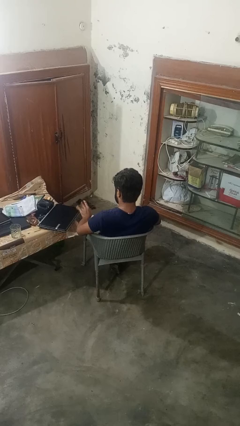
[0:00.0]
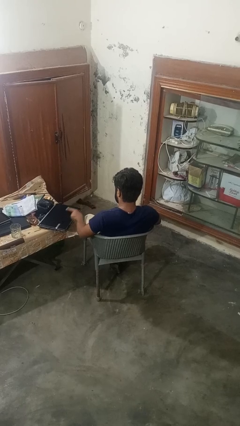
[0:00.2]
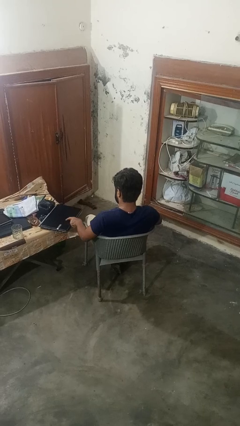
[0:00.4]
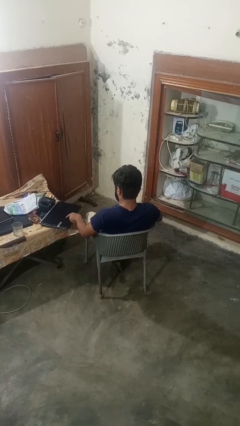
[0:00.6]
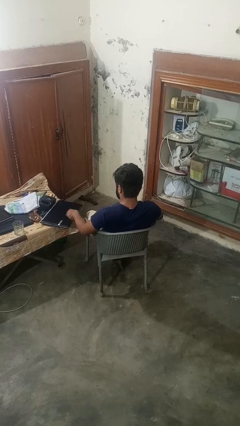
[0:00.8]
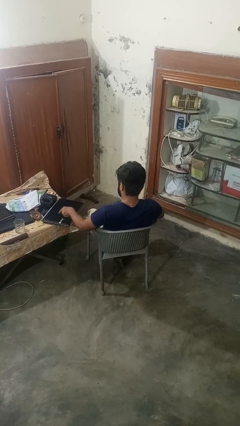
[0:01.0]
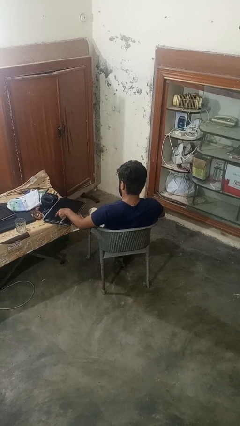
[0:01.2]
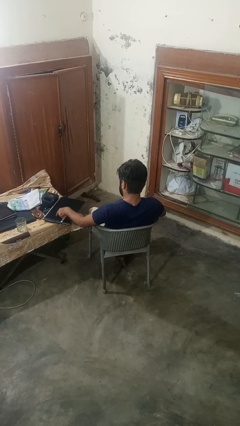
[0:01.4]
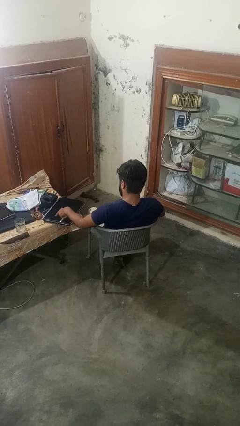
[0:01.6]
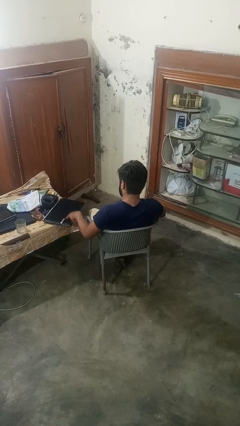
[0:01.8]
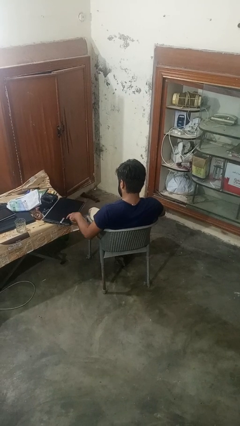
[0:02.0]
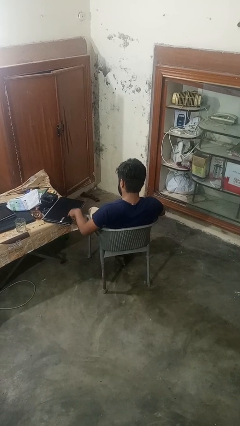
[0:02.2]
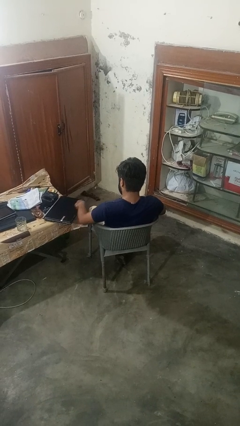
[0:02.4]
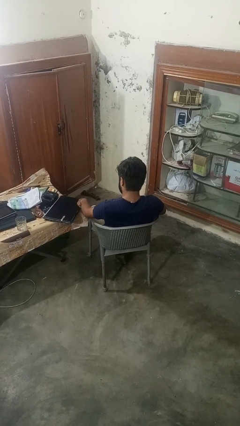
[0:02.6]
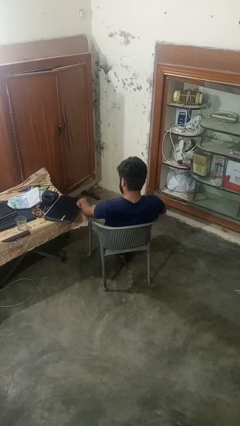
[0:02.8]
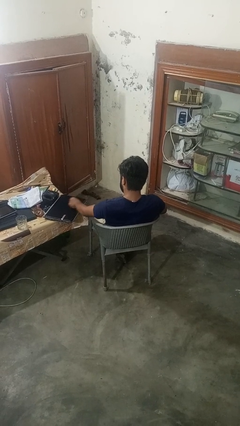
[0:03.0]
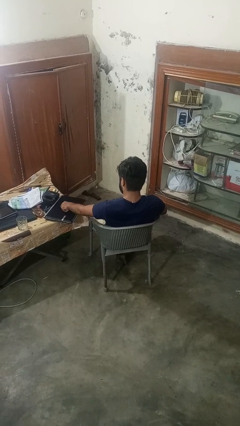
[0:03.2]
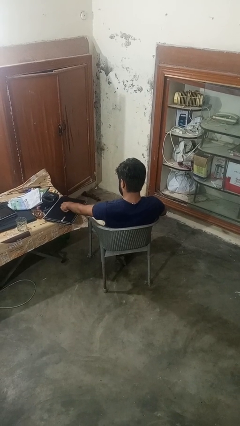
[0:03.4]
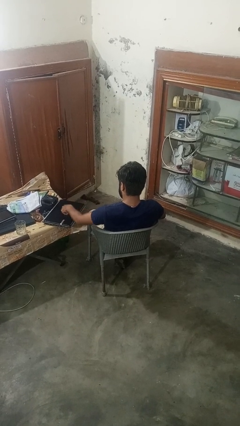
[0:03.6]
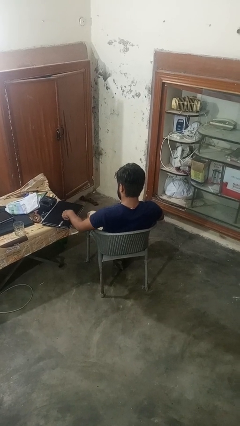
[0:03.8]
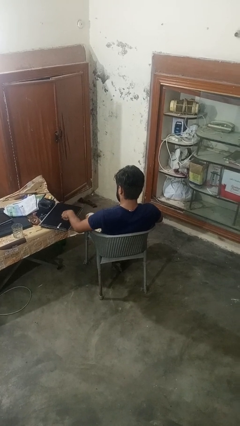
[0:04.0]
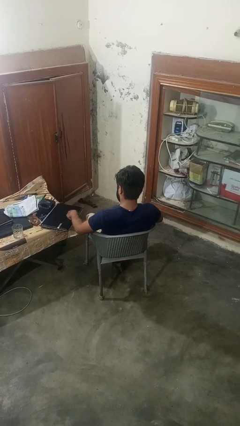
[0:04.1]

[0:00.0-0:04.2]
person taps object with finger

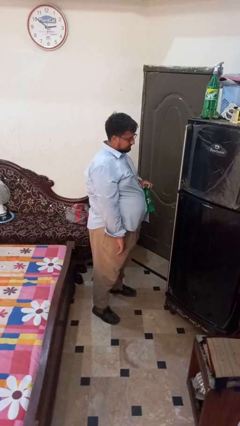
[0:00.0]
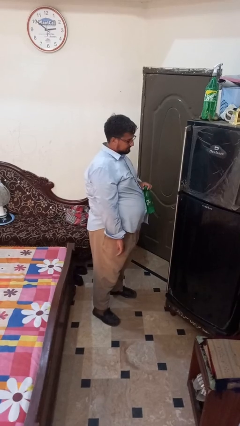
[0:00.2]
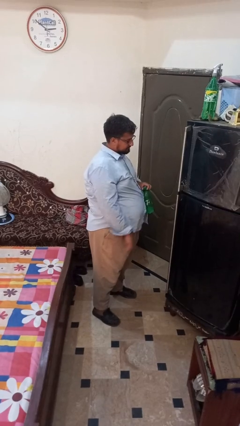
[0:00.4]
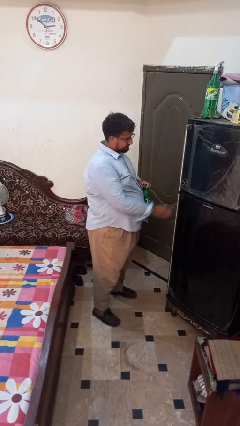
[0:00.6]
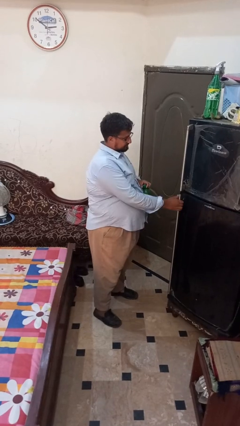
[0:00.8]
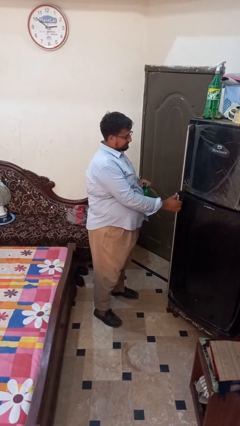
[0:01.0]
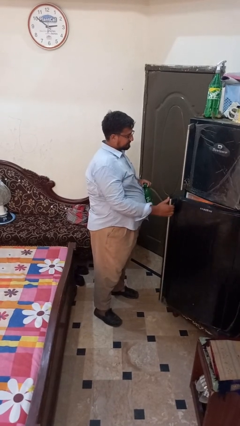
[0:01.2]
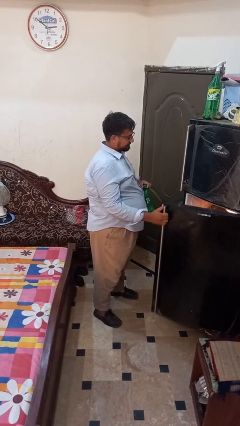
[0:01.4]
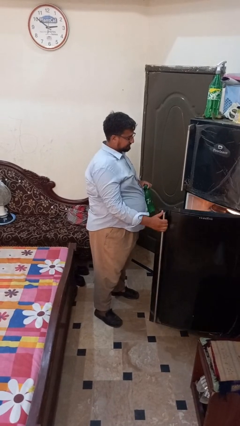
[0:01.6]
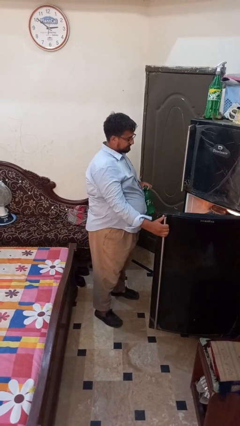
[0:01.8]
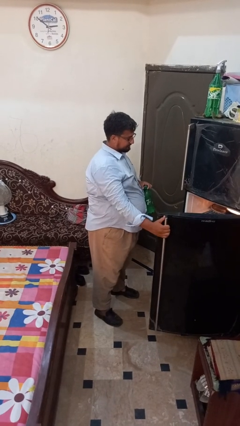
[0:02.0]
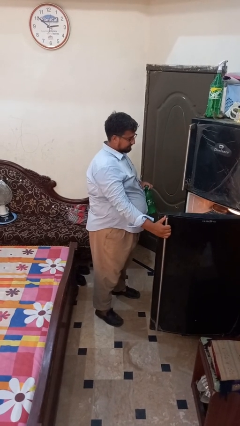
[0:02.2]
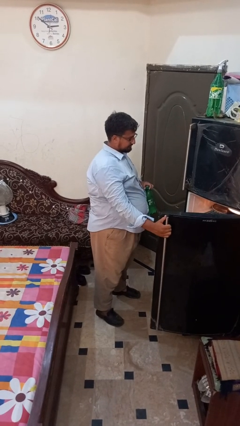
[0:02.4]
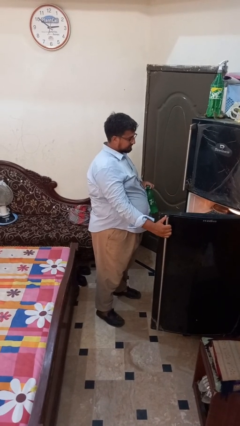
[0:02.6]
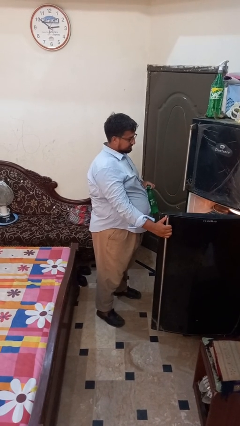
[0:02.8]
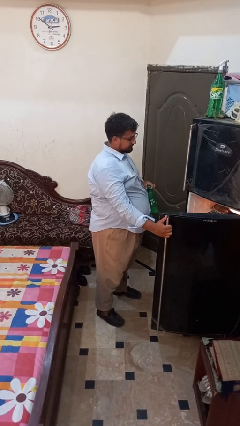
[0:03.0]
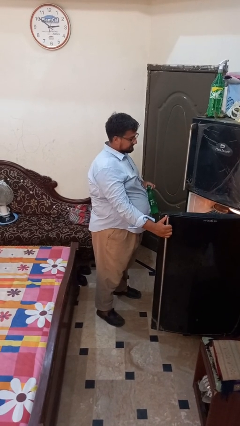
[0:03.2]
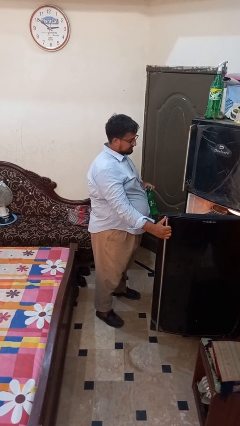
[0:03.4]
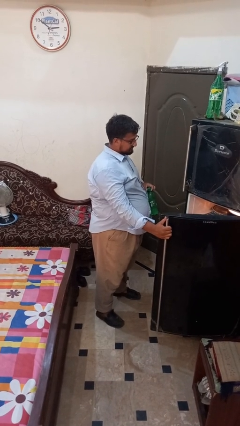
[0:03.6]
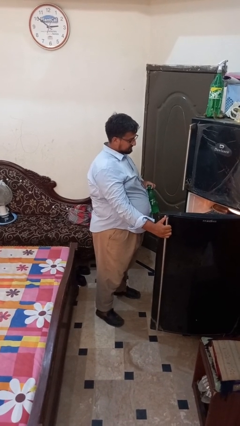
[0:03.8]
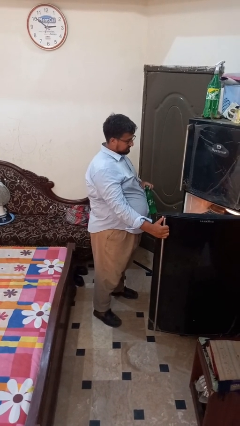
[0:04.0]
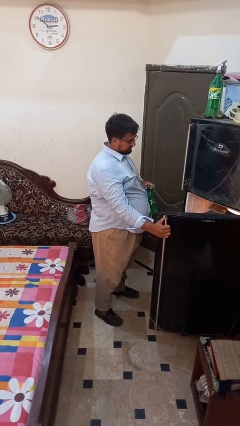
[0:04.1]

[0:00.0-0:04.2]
person opens refrigerator

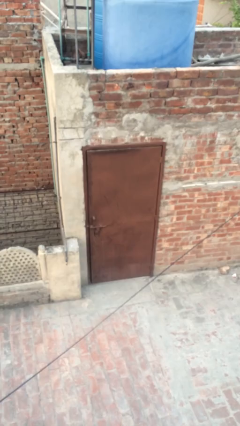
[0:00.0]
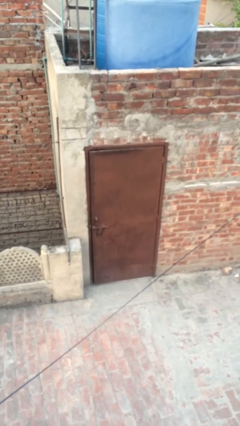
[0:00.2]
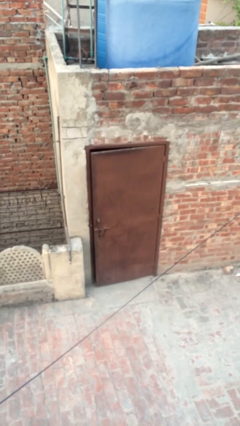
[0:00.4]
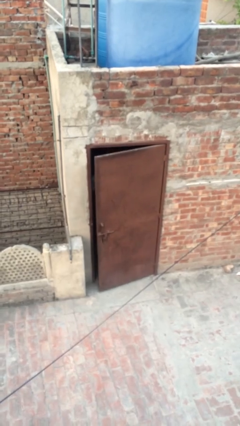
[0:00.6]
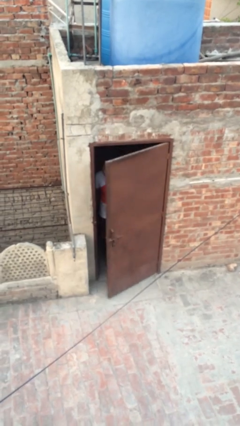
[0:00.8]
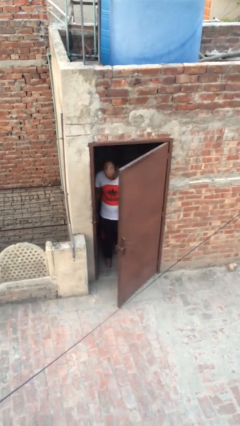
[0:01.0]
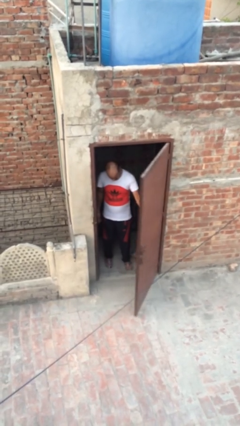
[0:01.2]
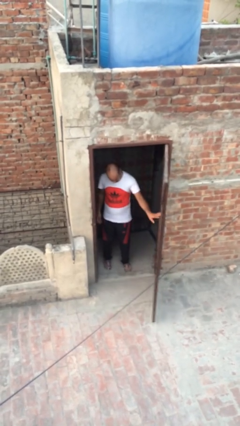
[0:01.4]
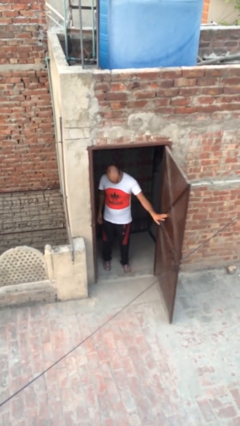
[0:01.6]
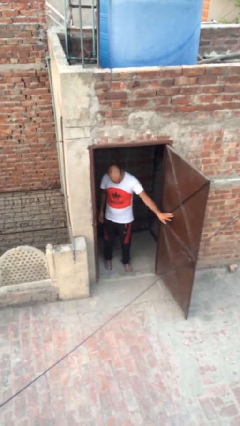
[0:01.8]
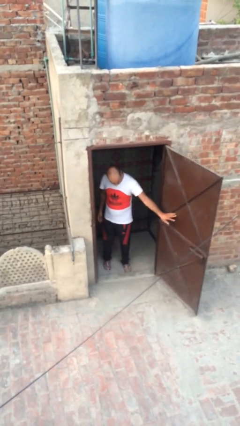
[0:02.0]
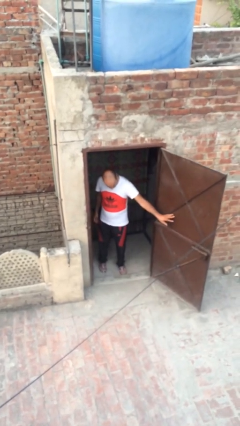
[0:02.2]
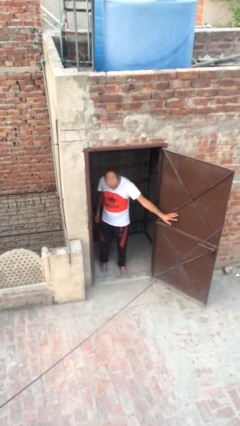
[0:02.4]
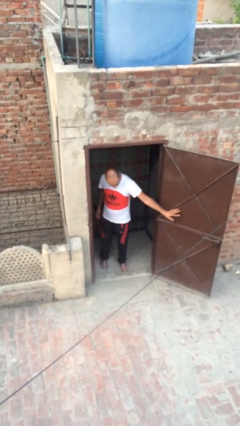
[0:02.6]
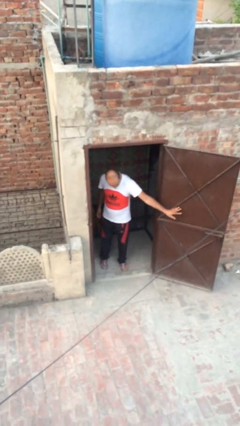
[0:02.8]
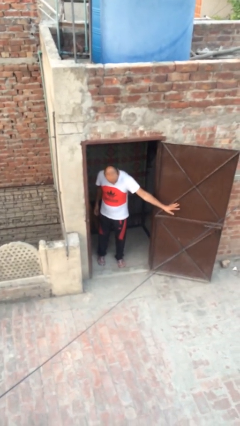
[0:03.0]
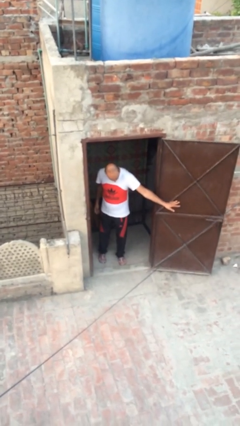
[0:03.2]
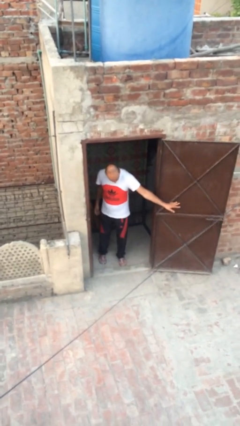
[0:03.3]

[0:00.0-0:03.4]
person opens facility door

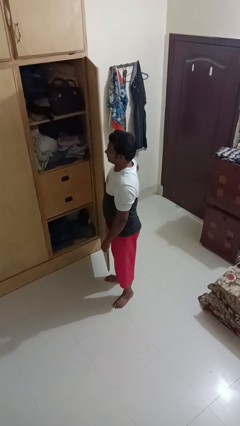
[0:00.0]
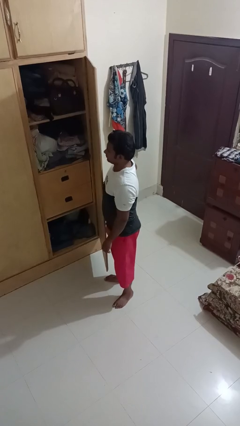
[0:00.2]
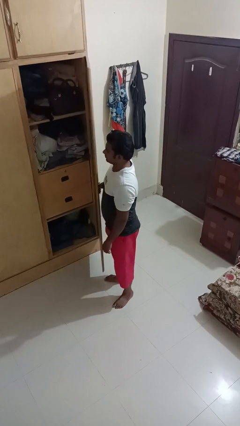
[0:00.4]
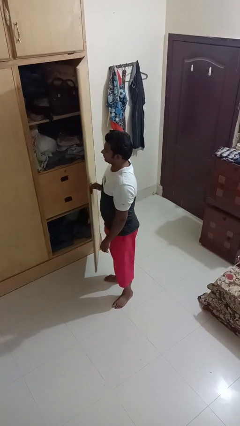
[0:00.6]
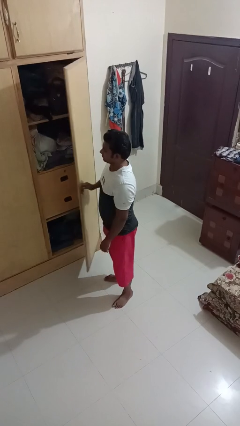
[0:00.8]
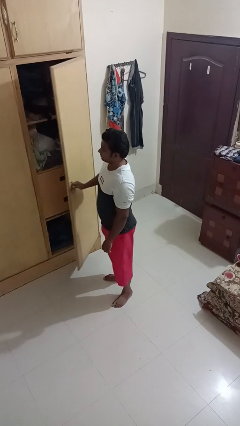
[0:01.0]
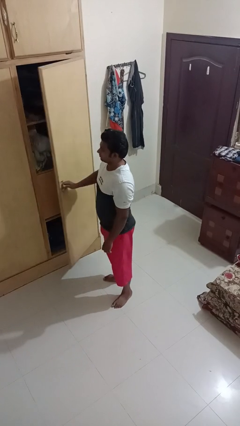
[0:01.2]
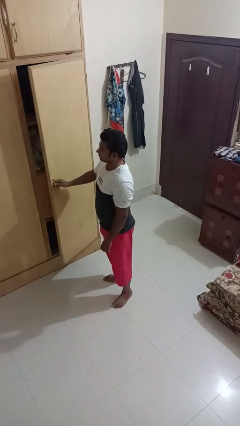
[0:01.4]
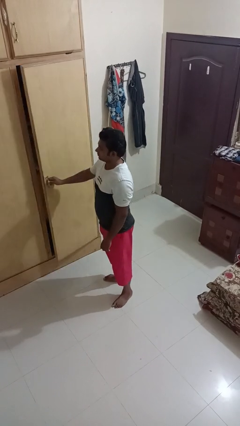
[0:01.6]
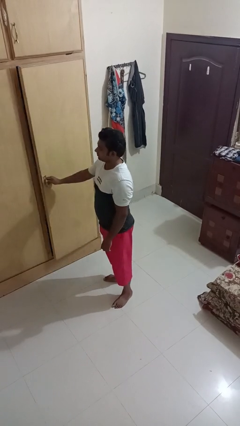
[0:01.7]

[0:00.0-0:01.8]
person closes closet door

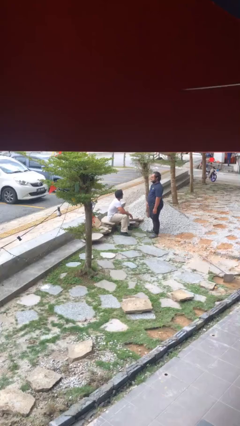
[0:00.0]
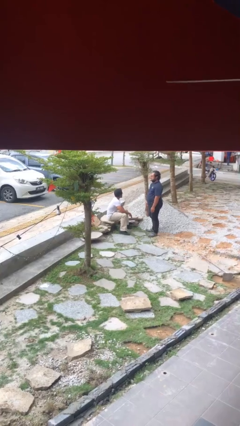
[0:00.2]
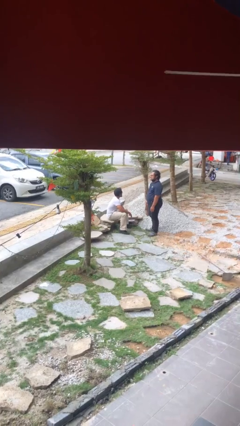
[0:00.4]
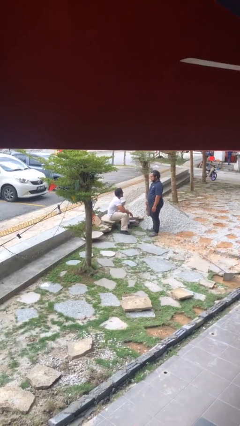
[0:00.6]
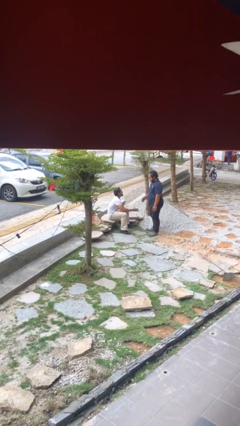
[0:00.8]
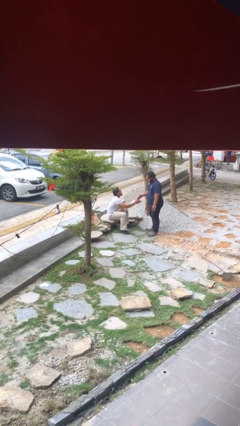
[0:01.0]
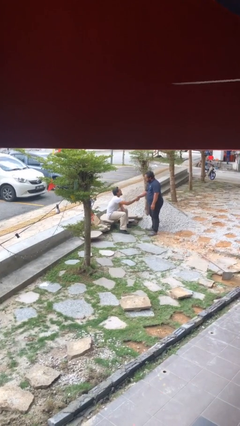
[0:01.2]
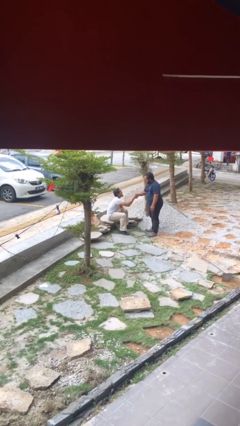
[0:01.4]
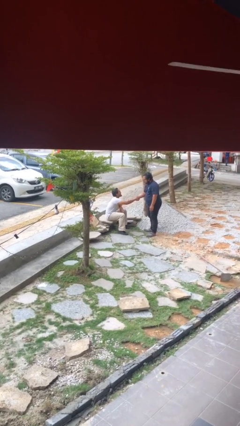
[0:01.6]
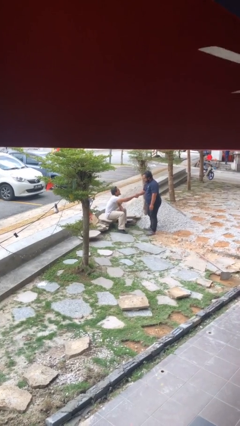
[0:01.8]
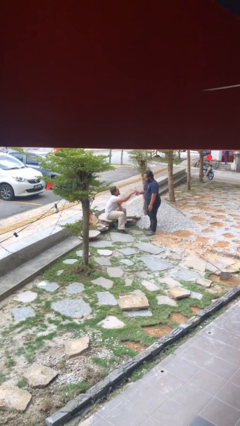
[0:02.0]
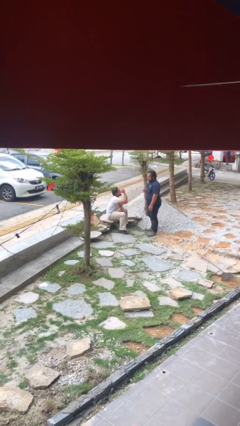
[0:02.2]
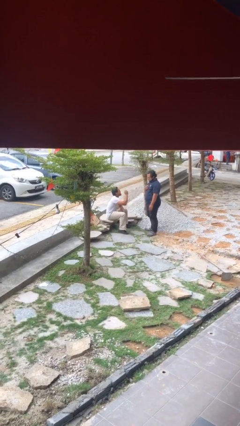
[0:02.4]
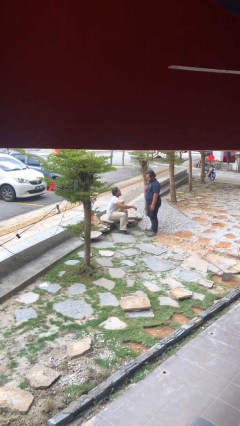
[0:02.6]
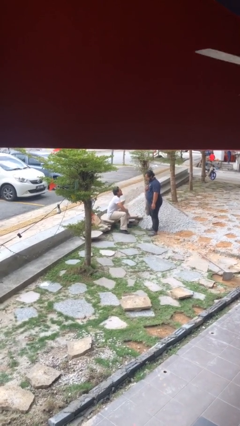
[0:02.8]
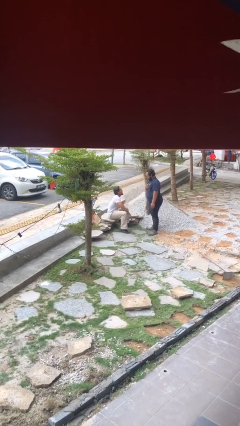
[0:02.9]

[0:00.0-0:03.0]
person shakes hand

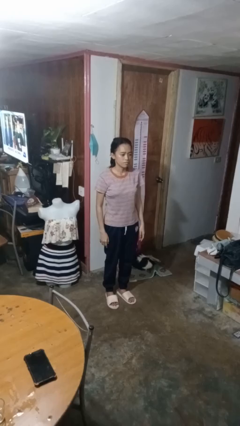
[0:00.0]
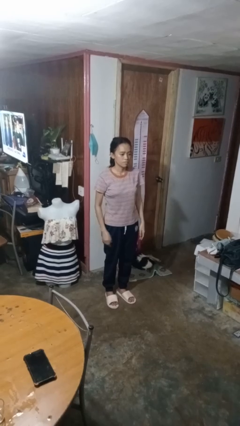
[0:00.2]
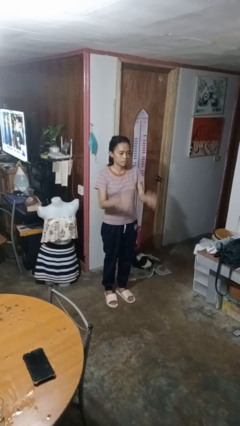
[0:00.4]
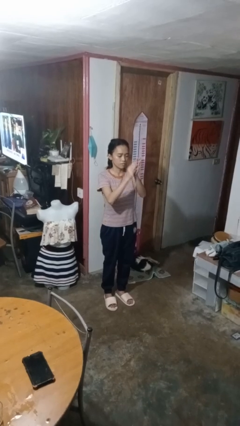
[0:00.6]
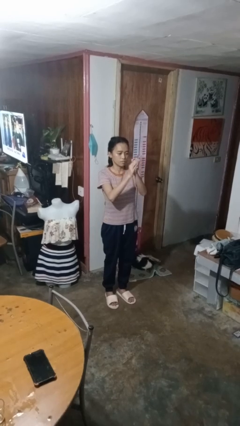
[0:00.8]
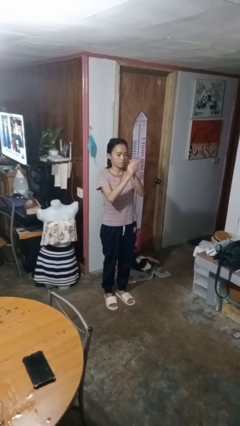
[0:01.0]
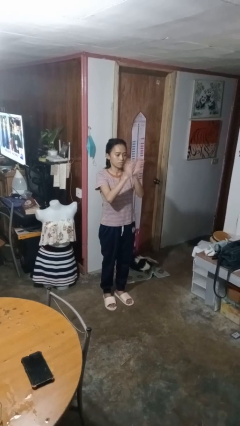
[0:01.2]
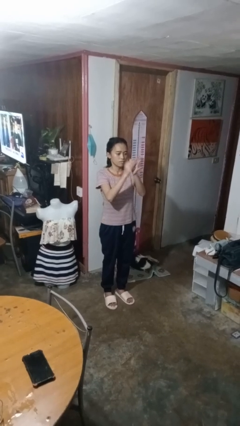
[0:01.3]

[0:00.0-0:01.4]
person claps hands
